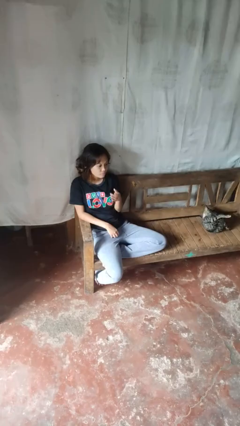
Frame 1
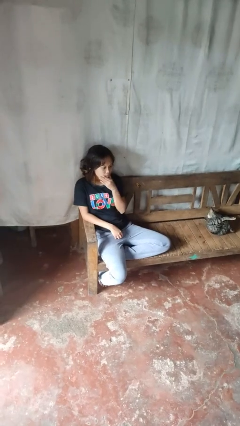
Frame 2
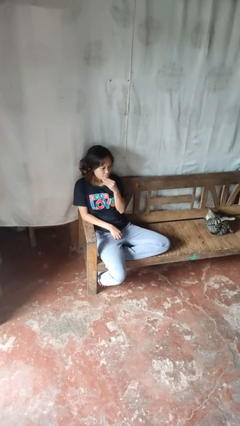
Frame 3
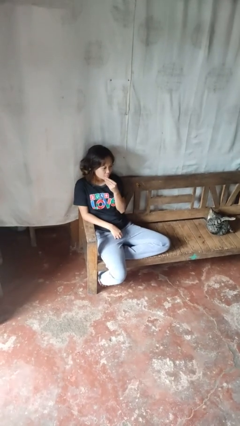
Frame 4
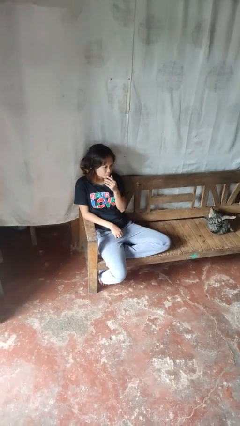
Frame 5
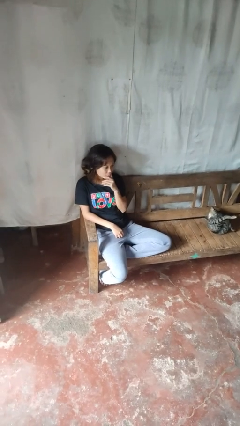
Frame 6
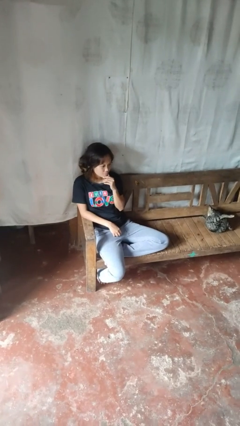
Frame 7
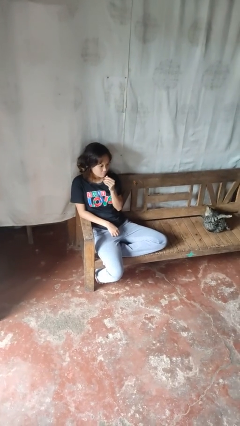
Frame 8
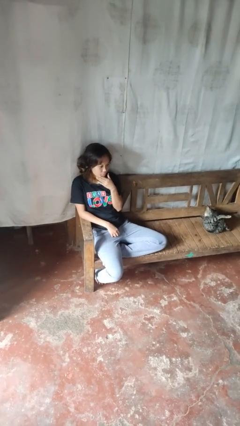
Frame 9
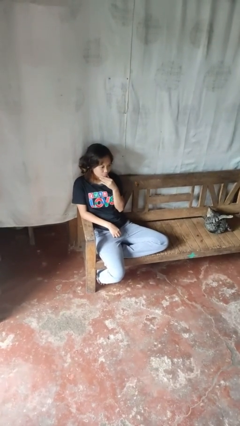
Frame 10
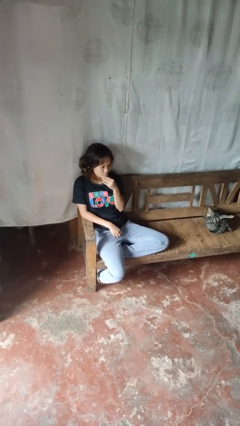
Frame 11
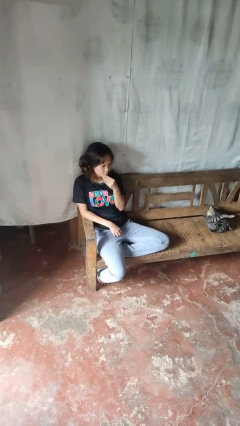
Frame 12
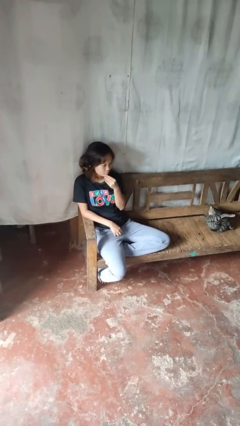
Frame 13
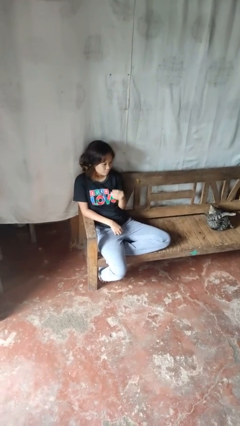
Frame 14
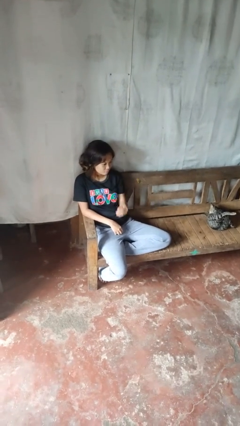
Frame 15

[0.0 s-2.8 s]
person strokes chin

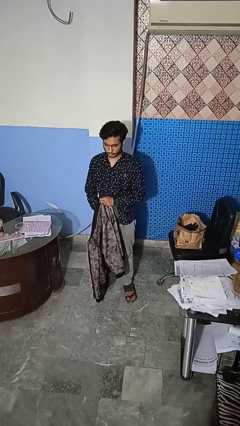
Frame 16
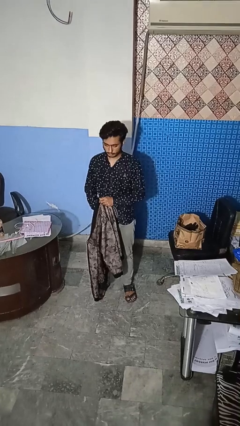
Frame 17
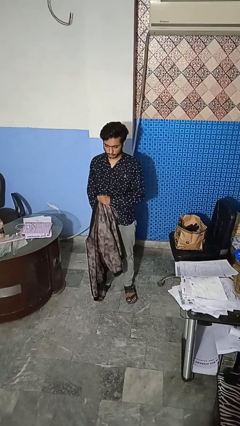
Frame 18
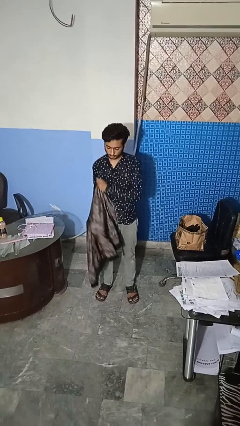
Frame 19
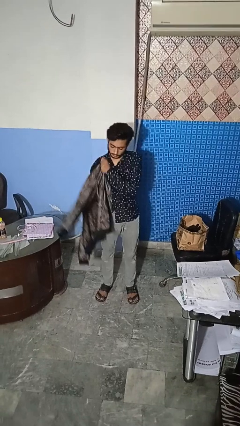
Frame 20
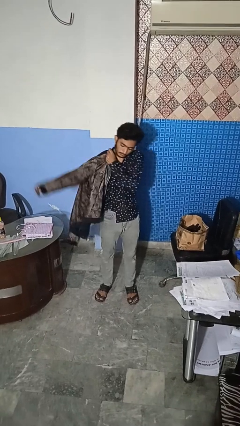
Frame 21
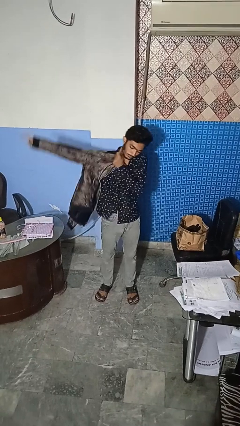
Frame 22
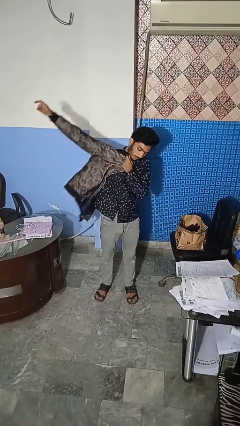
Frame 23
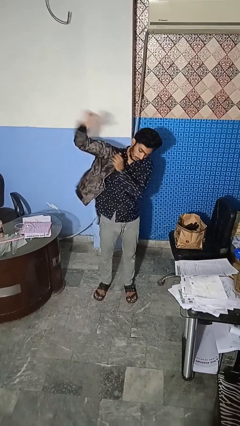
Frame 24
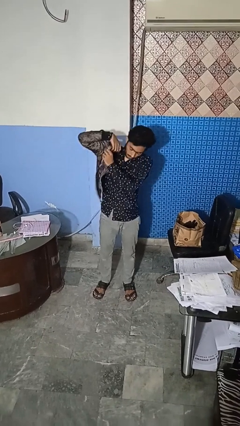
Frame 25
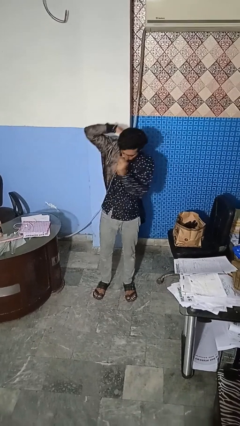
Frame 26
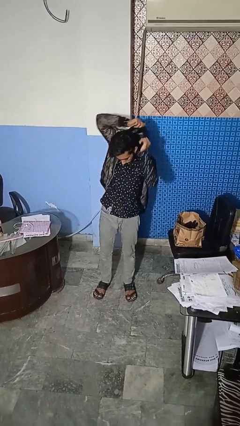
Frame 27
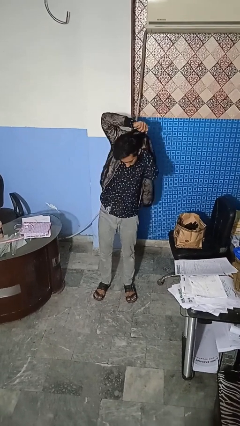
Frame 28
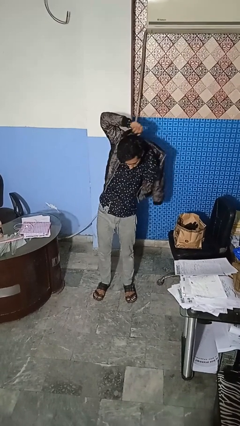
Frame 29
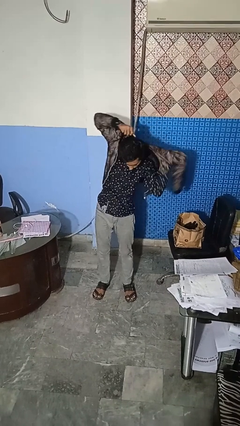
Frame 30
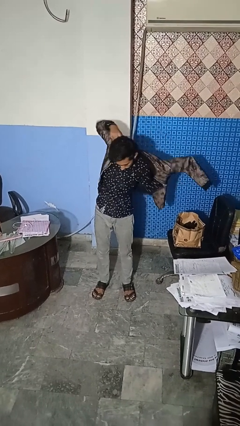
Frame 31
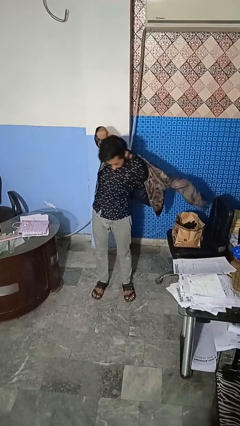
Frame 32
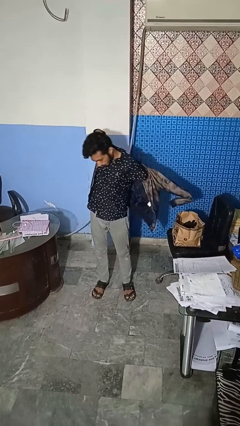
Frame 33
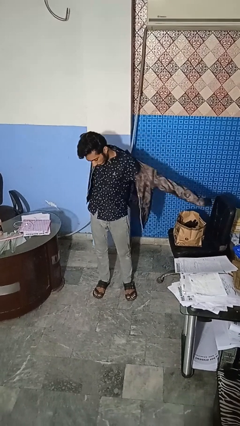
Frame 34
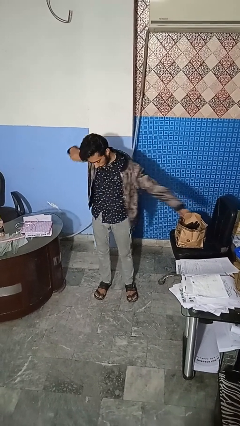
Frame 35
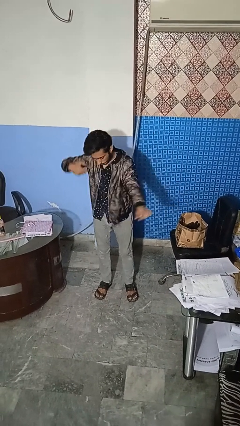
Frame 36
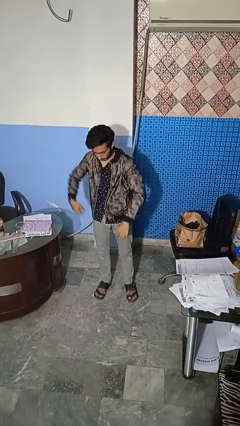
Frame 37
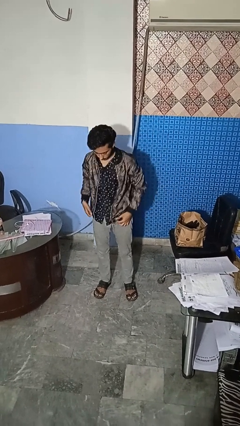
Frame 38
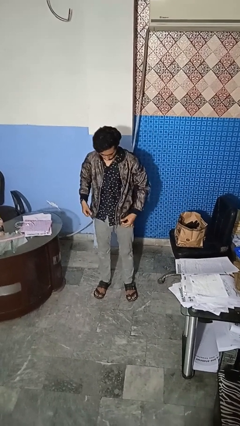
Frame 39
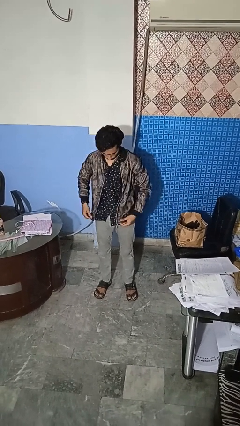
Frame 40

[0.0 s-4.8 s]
person puts on jacket

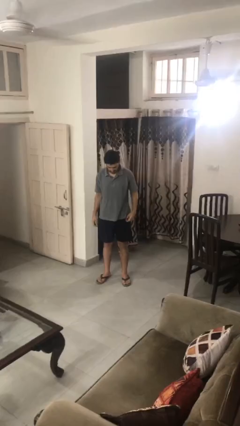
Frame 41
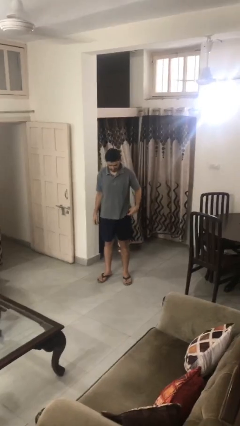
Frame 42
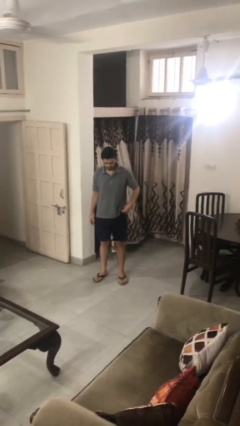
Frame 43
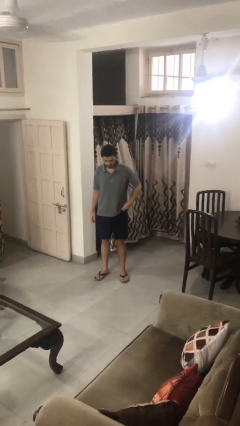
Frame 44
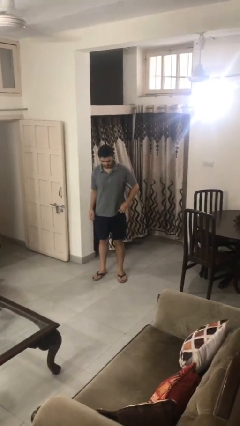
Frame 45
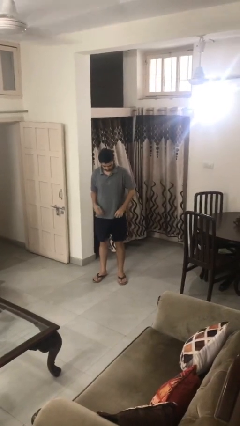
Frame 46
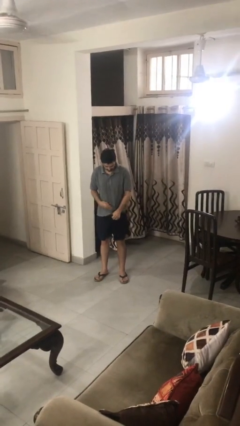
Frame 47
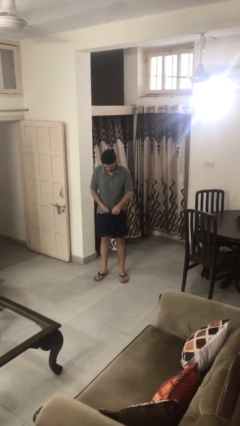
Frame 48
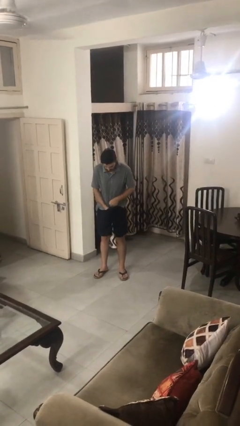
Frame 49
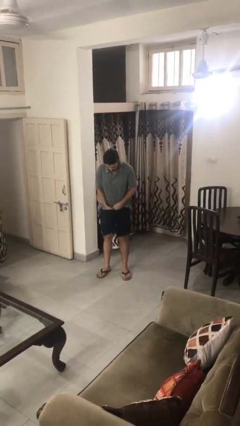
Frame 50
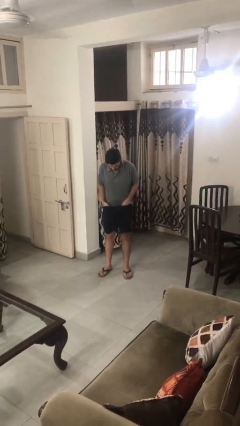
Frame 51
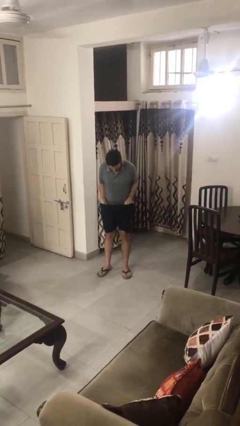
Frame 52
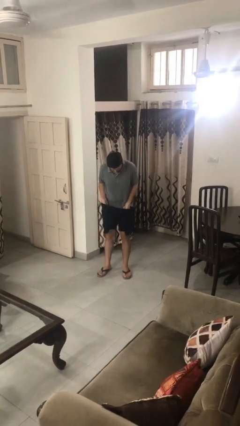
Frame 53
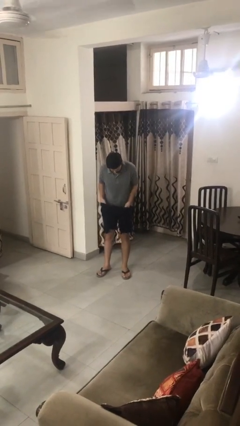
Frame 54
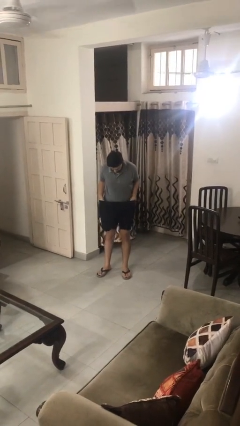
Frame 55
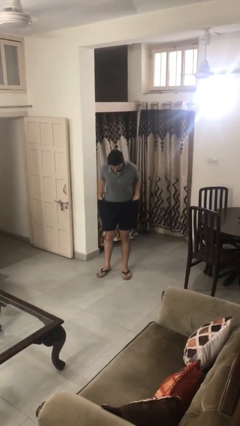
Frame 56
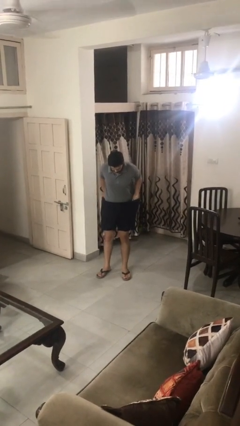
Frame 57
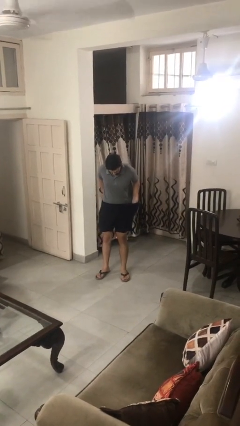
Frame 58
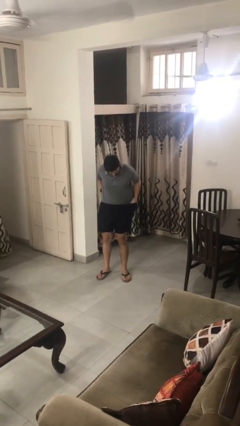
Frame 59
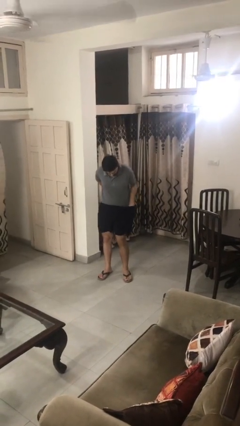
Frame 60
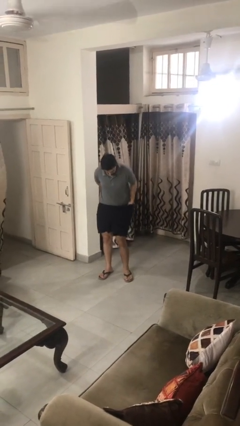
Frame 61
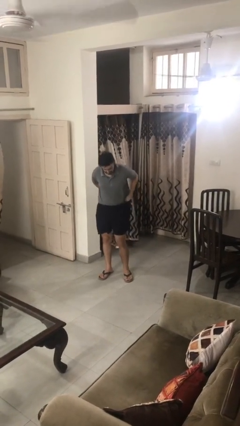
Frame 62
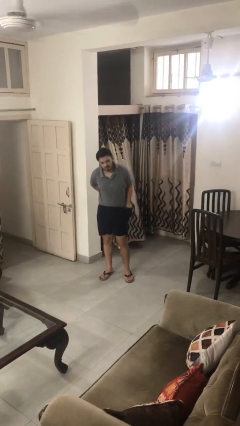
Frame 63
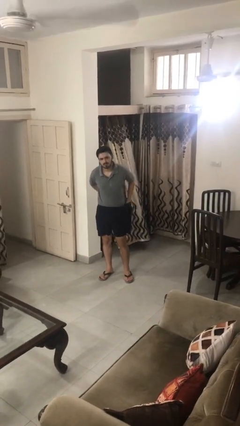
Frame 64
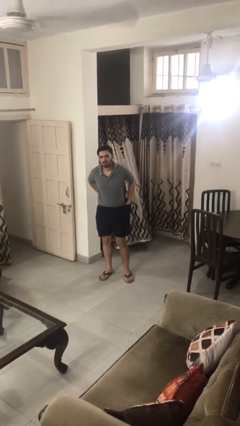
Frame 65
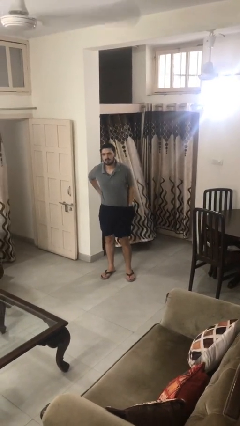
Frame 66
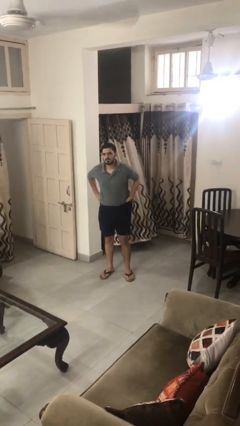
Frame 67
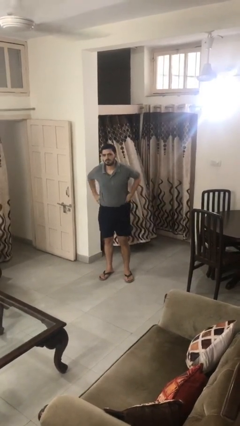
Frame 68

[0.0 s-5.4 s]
person tucks in shirt

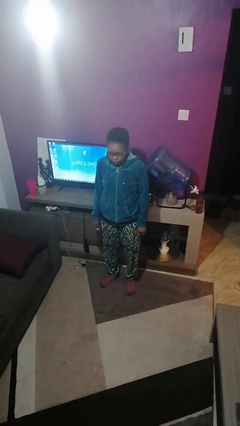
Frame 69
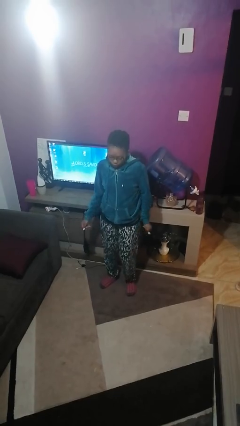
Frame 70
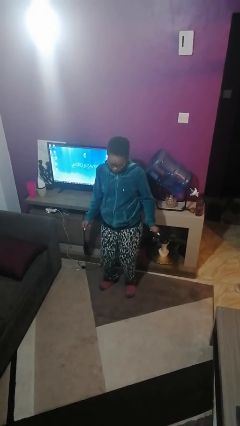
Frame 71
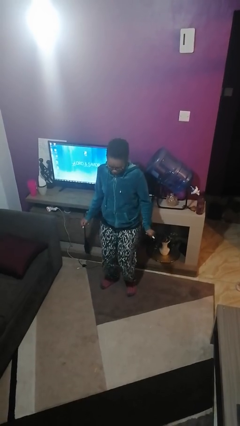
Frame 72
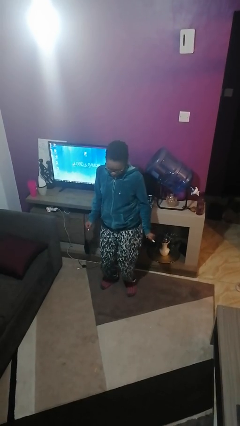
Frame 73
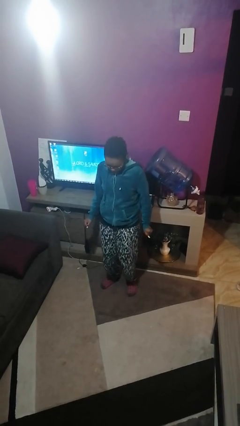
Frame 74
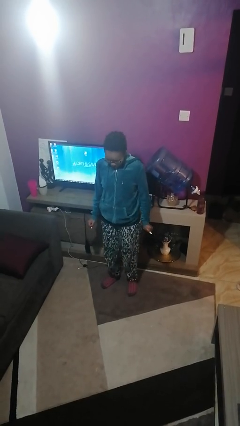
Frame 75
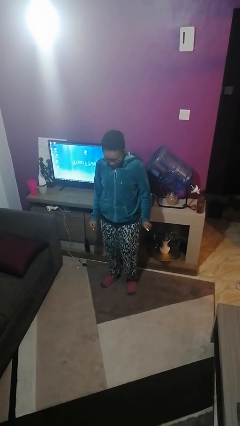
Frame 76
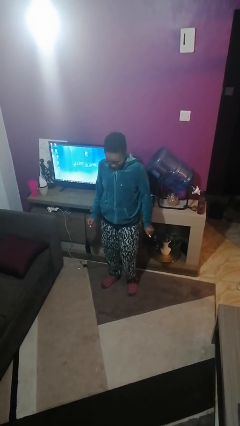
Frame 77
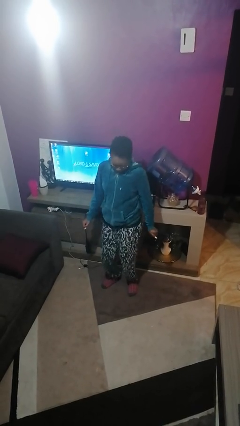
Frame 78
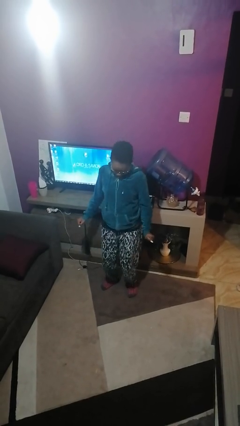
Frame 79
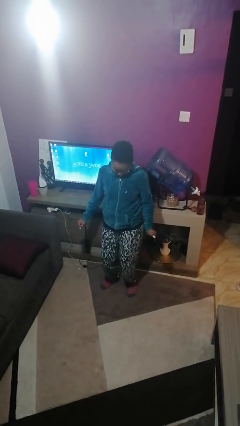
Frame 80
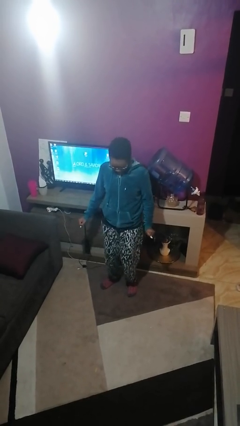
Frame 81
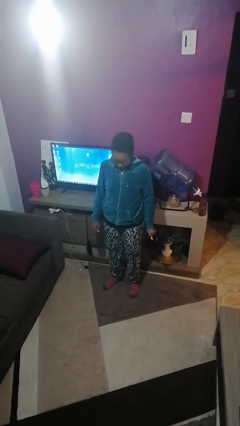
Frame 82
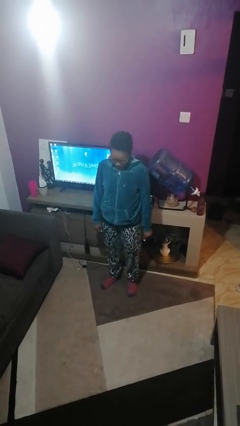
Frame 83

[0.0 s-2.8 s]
person dances in place

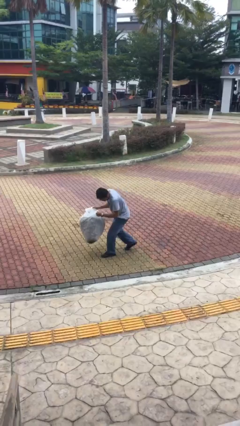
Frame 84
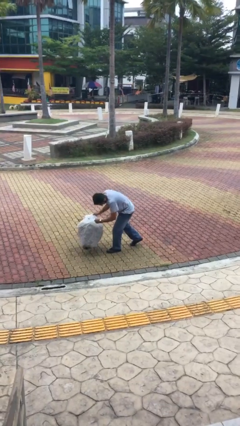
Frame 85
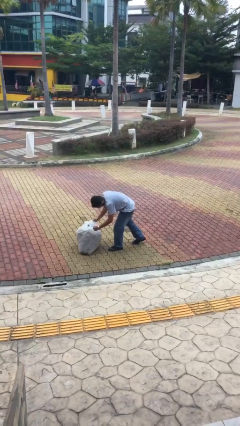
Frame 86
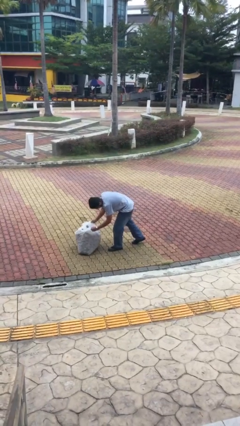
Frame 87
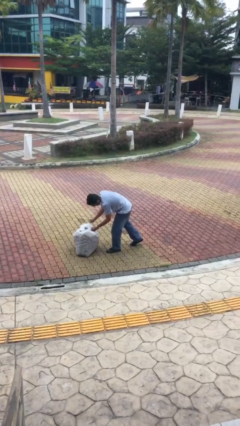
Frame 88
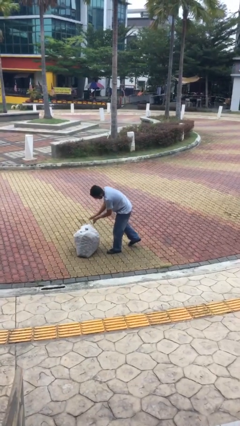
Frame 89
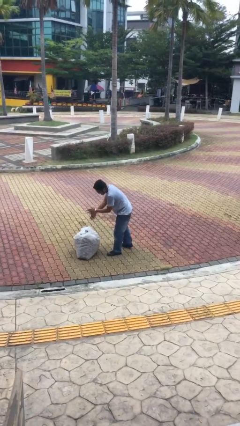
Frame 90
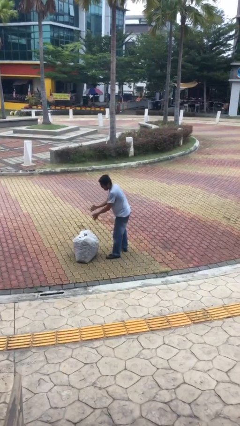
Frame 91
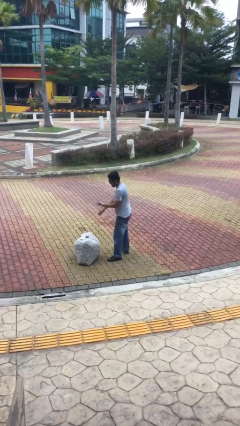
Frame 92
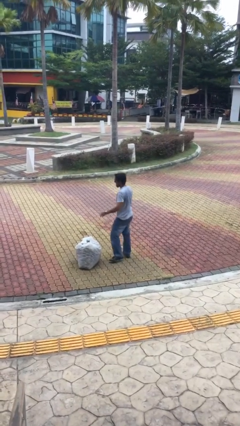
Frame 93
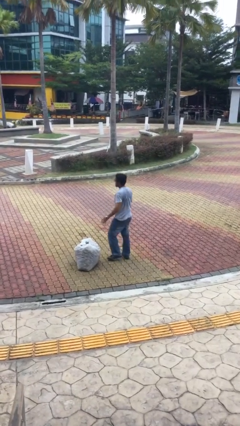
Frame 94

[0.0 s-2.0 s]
person puts down object on floor
